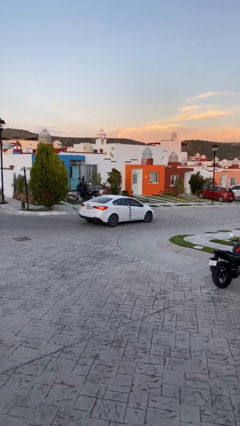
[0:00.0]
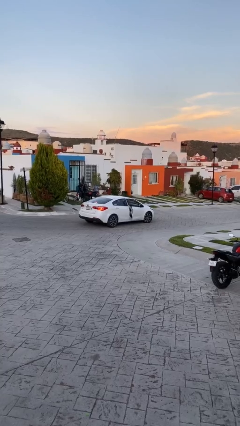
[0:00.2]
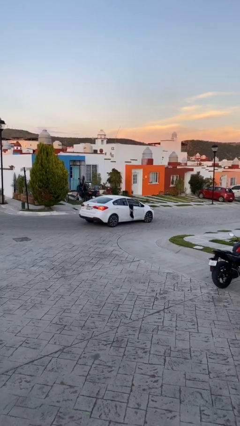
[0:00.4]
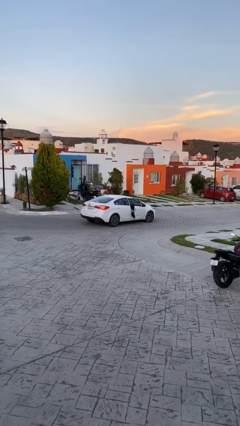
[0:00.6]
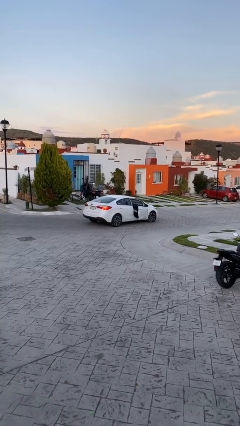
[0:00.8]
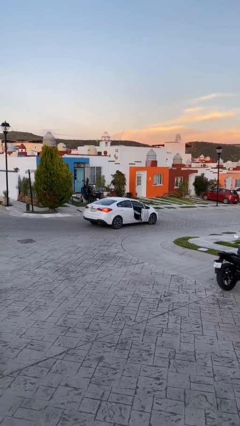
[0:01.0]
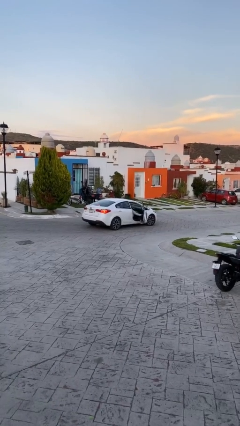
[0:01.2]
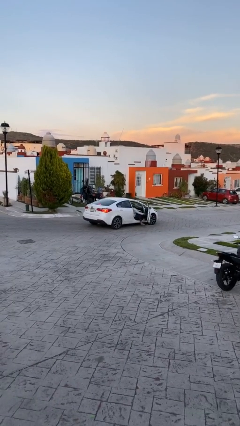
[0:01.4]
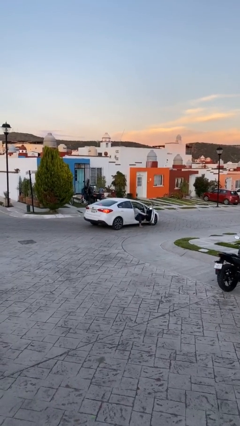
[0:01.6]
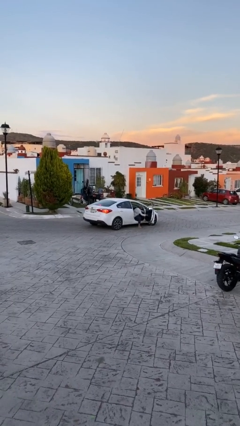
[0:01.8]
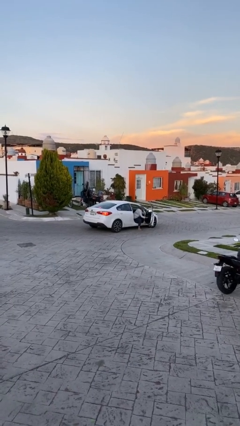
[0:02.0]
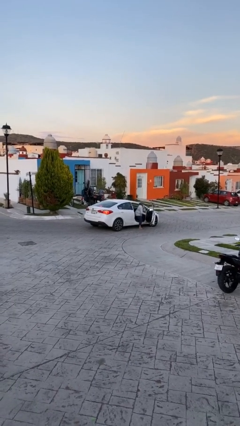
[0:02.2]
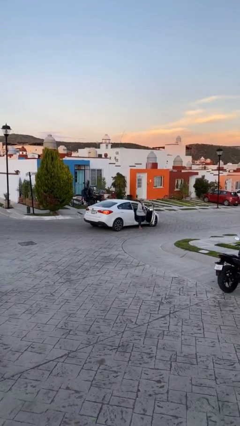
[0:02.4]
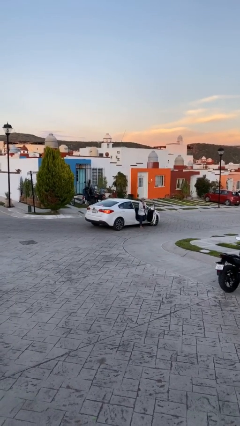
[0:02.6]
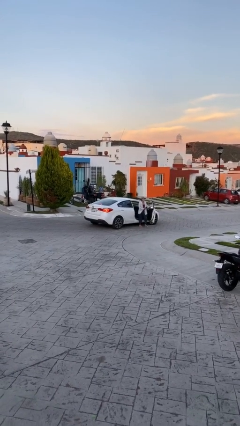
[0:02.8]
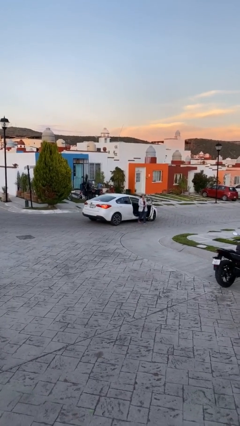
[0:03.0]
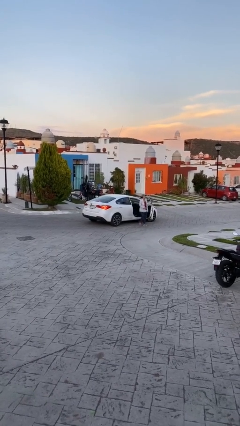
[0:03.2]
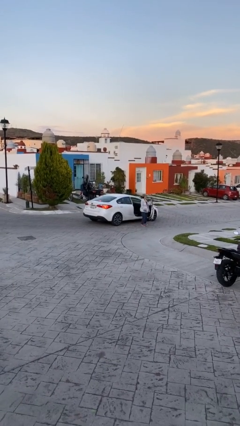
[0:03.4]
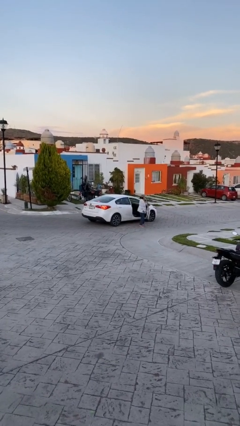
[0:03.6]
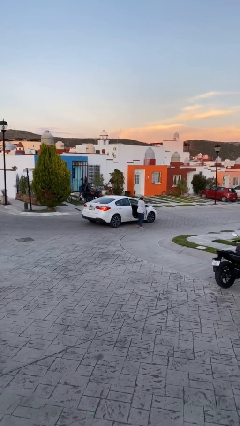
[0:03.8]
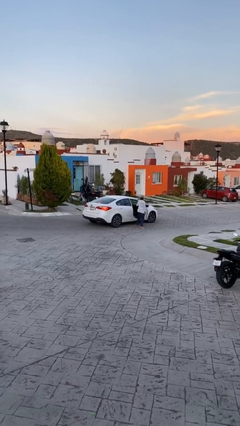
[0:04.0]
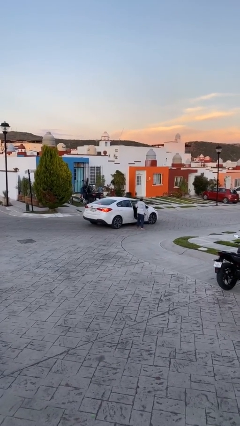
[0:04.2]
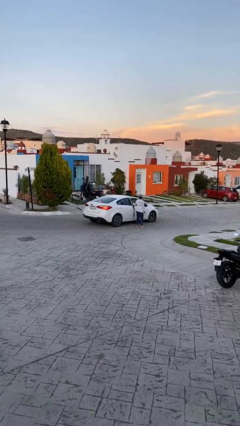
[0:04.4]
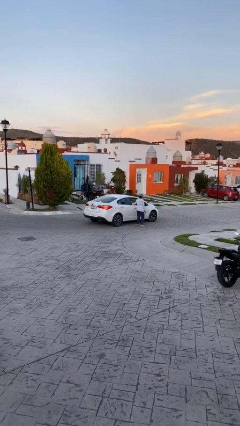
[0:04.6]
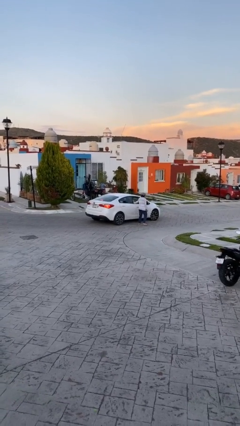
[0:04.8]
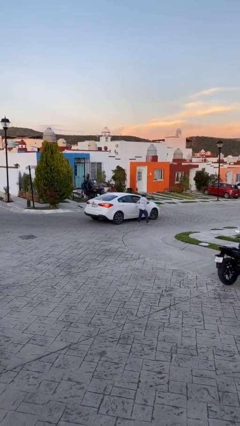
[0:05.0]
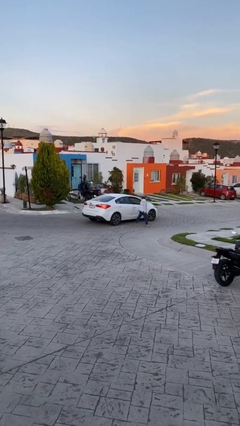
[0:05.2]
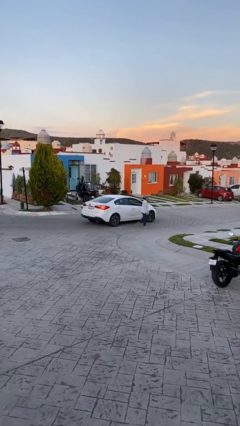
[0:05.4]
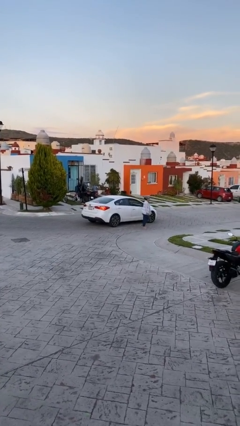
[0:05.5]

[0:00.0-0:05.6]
car drops off person

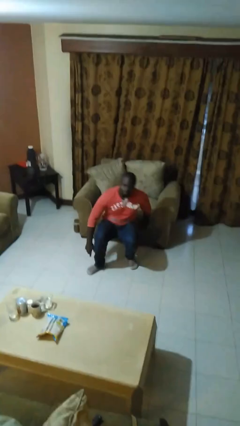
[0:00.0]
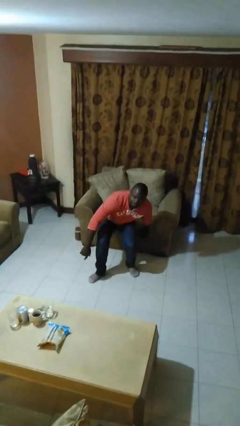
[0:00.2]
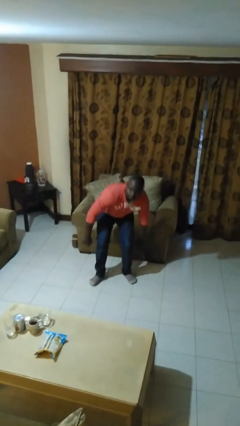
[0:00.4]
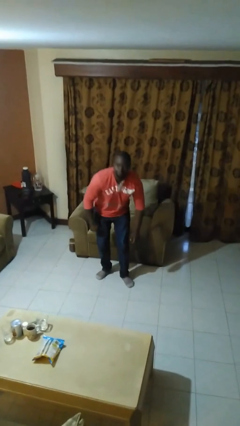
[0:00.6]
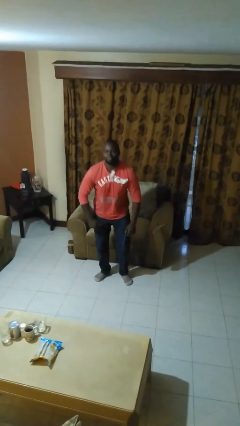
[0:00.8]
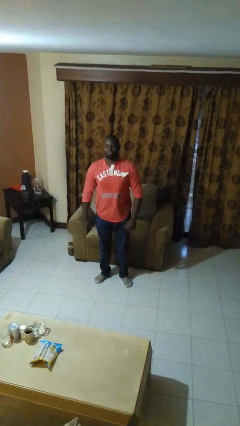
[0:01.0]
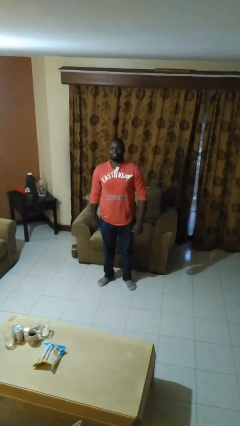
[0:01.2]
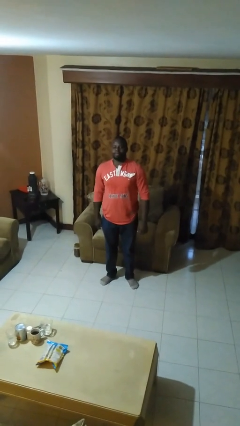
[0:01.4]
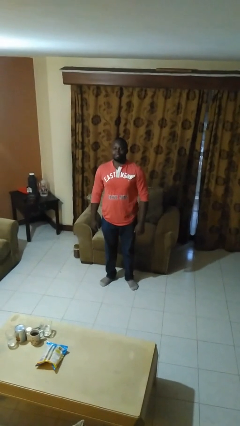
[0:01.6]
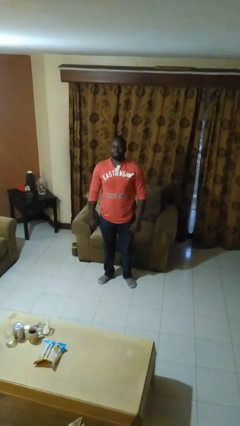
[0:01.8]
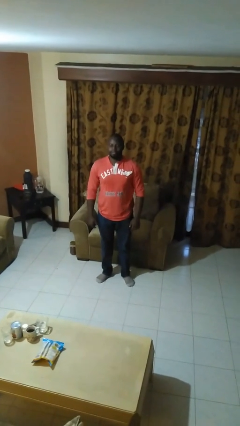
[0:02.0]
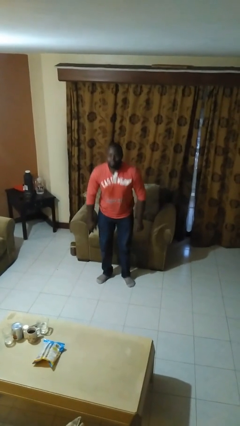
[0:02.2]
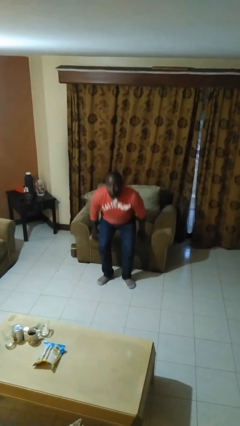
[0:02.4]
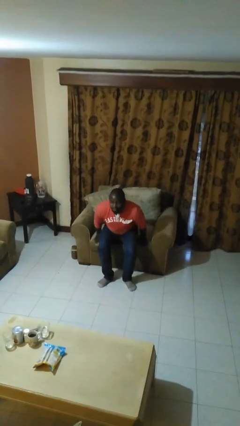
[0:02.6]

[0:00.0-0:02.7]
person stands up from floor

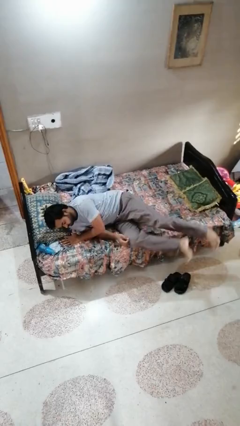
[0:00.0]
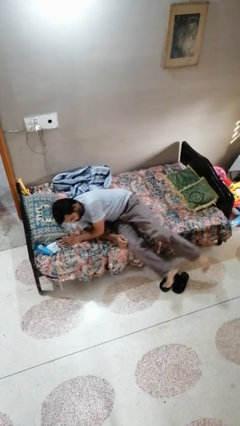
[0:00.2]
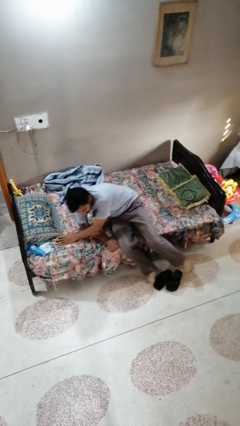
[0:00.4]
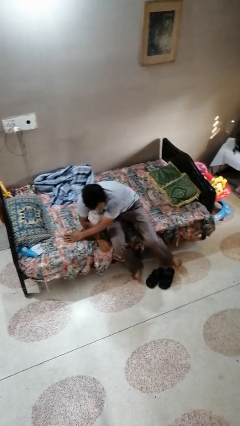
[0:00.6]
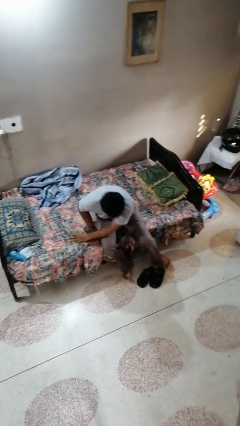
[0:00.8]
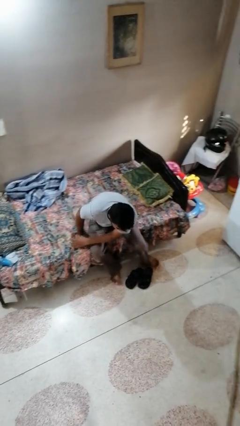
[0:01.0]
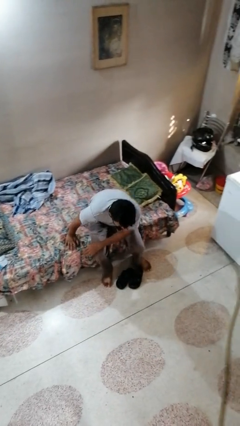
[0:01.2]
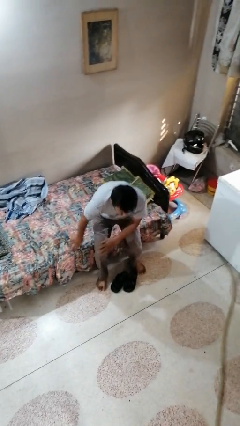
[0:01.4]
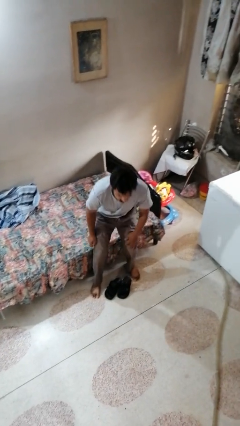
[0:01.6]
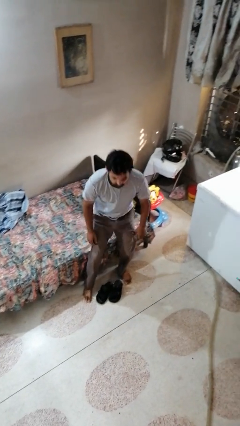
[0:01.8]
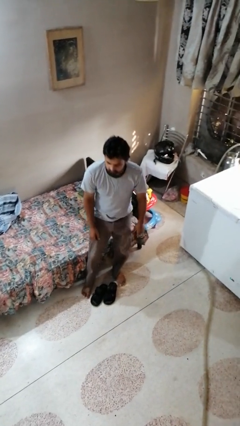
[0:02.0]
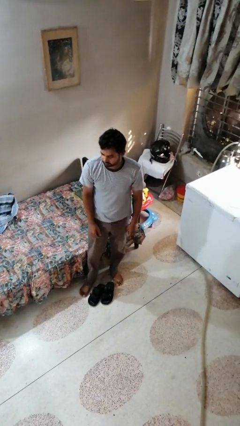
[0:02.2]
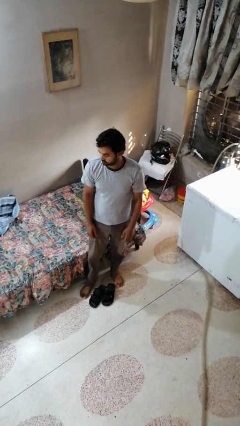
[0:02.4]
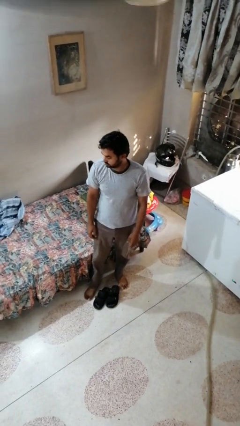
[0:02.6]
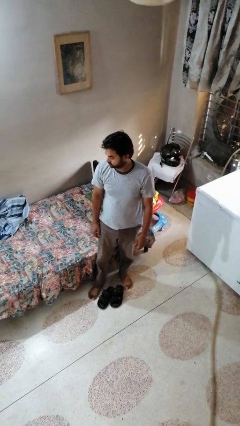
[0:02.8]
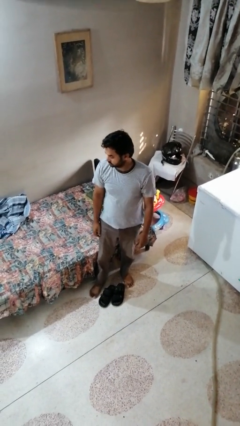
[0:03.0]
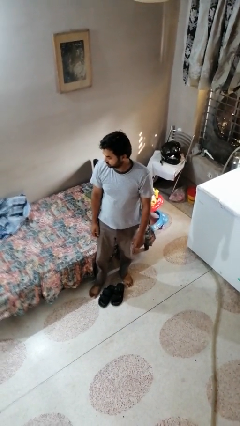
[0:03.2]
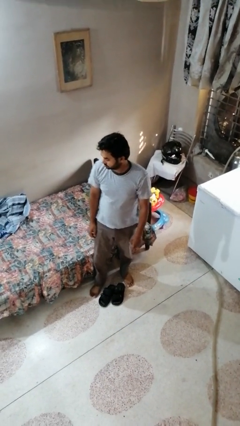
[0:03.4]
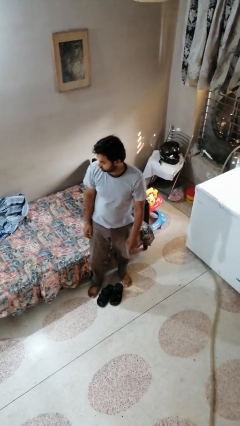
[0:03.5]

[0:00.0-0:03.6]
person stands up

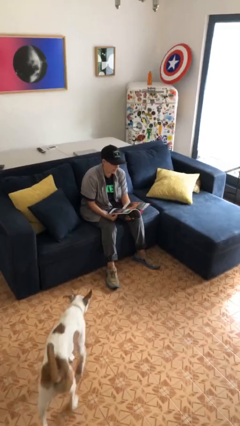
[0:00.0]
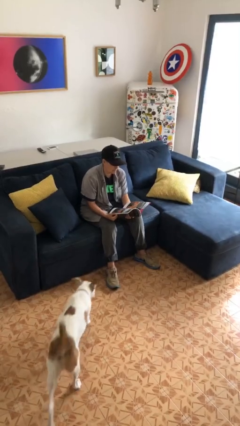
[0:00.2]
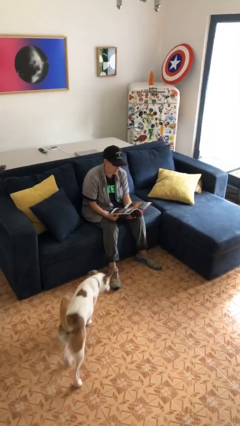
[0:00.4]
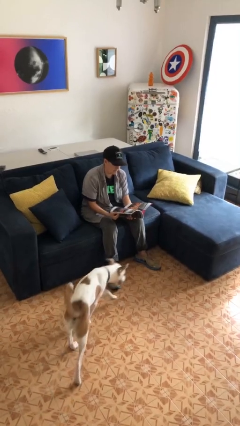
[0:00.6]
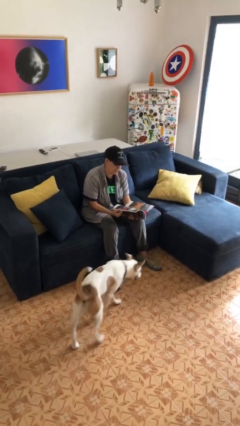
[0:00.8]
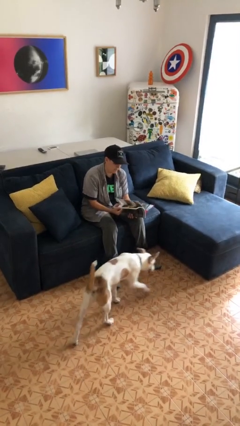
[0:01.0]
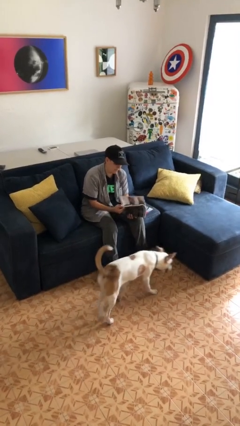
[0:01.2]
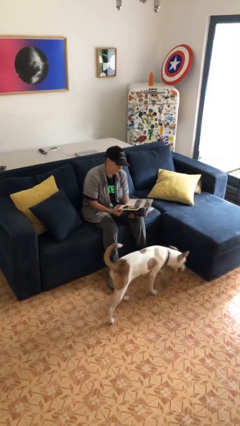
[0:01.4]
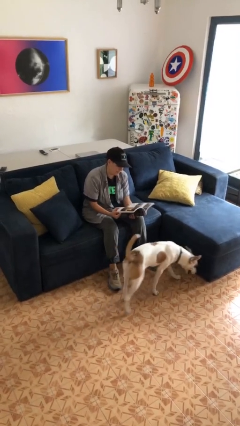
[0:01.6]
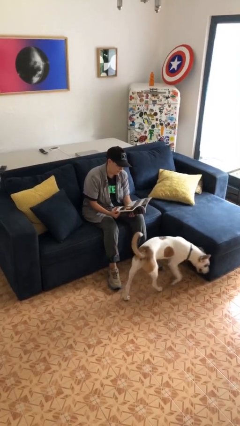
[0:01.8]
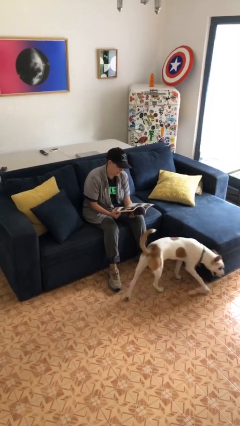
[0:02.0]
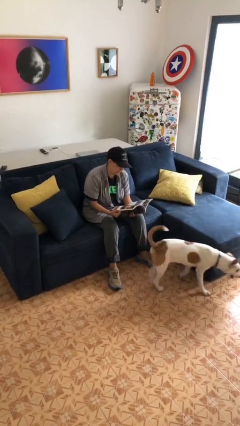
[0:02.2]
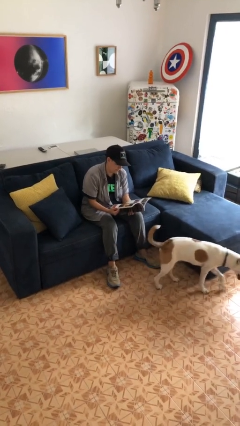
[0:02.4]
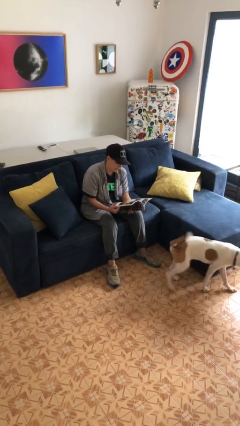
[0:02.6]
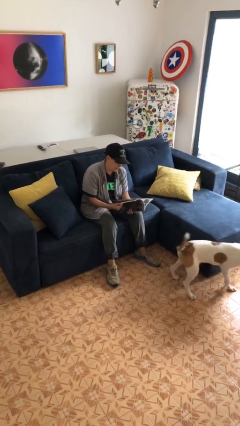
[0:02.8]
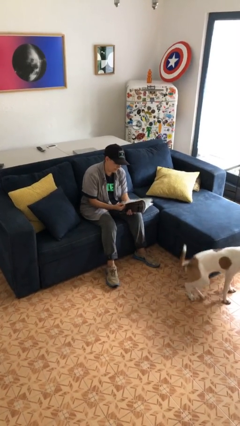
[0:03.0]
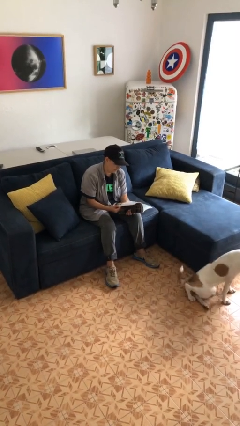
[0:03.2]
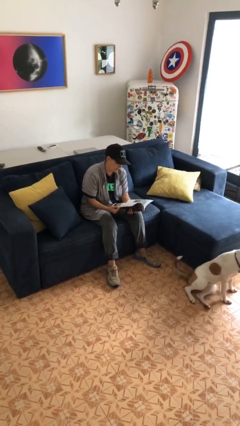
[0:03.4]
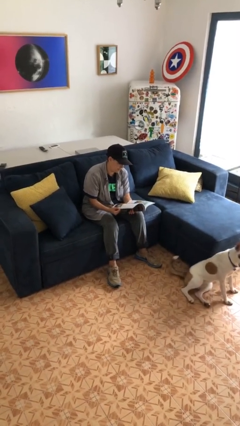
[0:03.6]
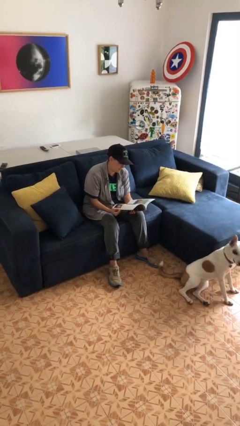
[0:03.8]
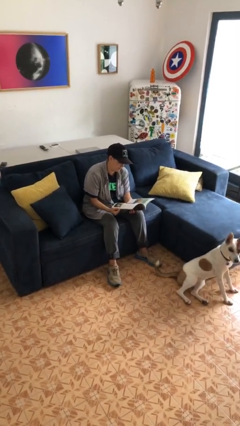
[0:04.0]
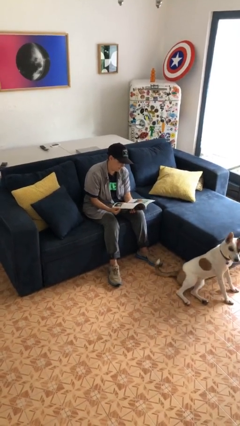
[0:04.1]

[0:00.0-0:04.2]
person reads magazine

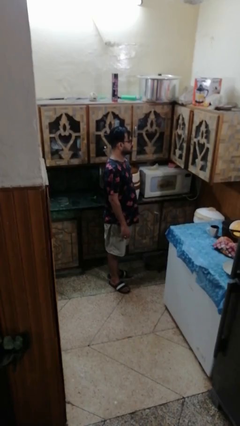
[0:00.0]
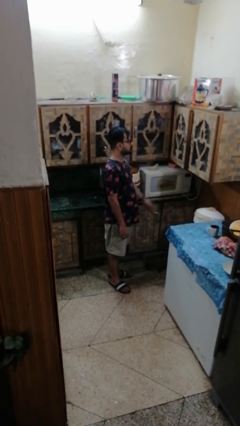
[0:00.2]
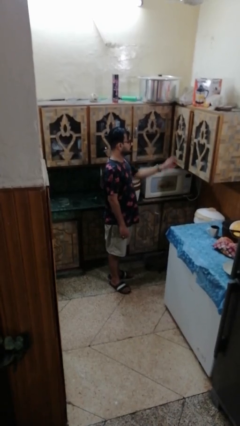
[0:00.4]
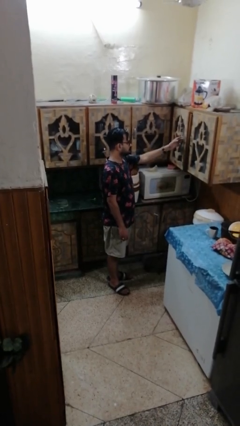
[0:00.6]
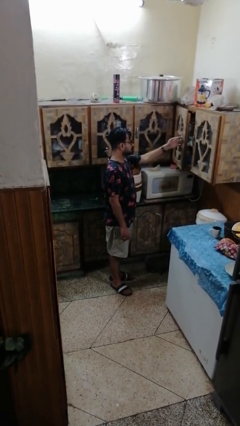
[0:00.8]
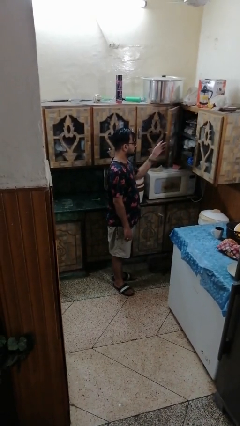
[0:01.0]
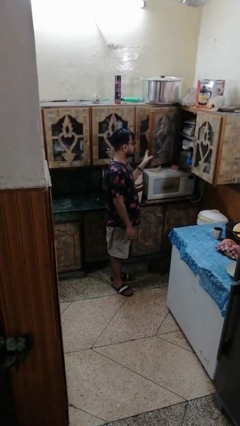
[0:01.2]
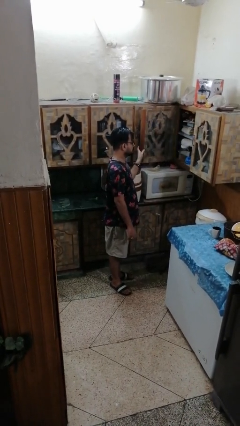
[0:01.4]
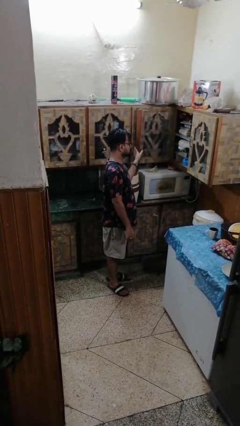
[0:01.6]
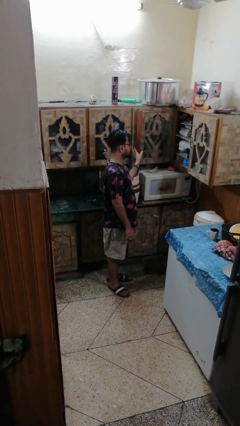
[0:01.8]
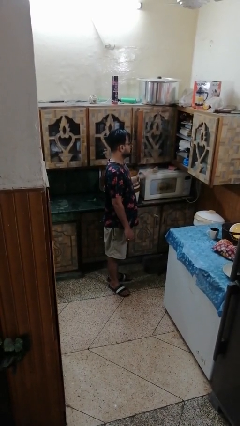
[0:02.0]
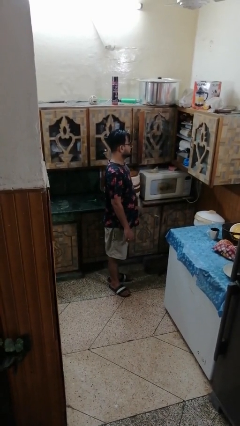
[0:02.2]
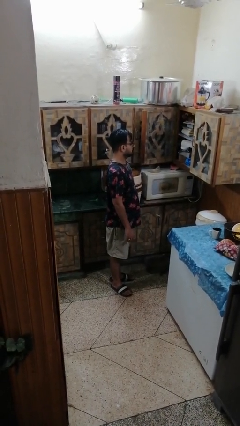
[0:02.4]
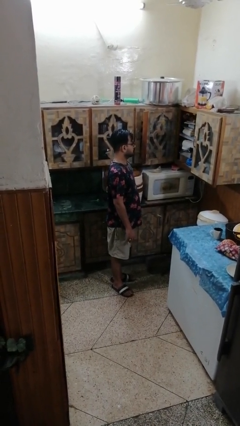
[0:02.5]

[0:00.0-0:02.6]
person opens cabinet
